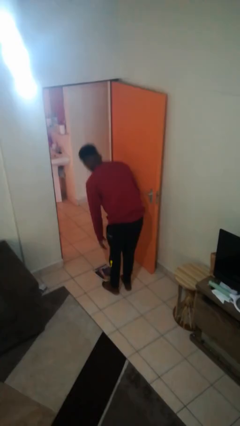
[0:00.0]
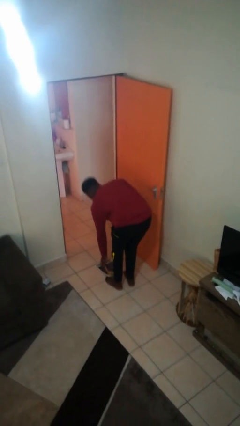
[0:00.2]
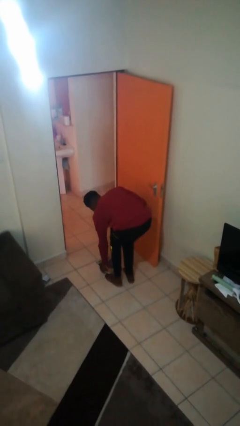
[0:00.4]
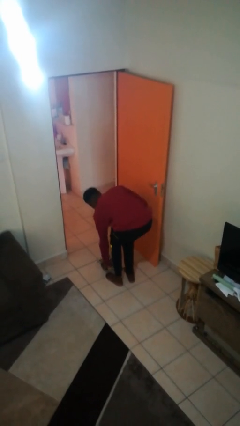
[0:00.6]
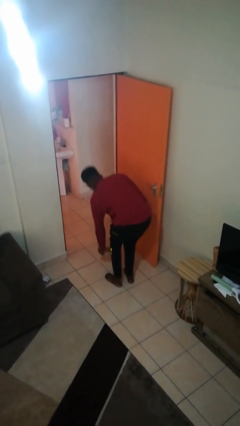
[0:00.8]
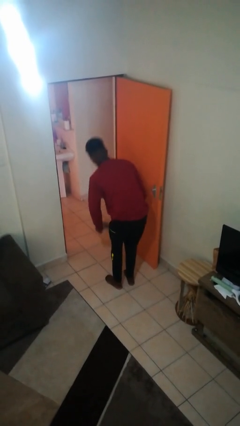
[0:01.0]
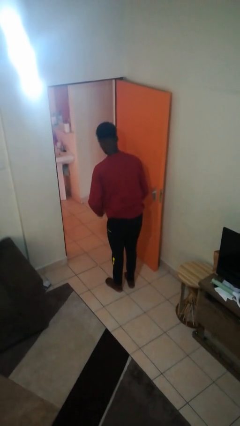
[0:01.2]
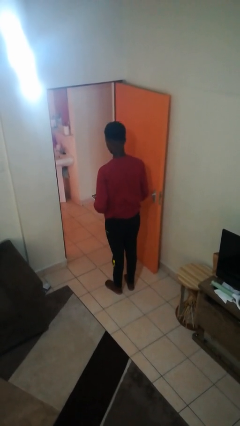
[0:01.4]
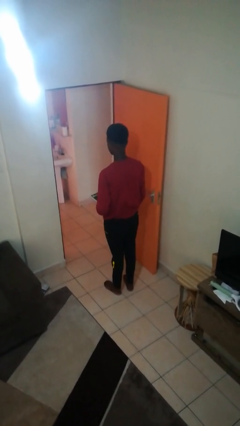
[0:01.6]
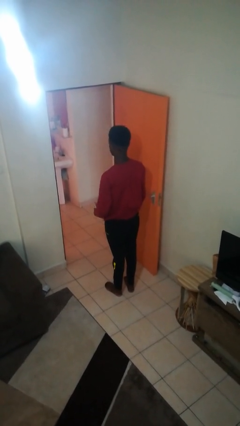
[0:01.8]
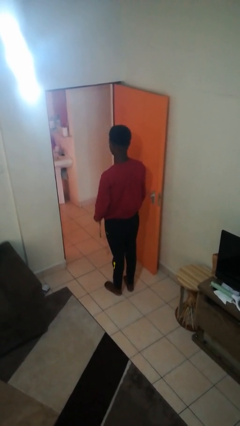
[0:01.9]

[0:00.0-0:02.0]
person picks up object from floor

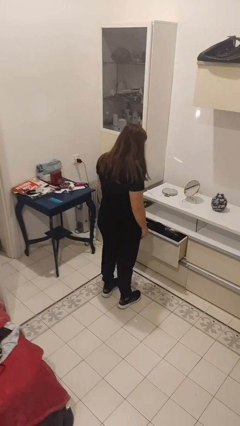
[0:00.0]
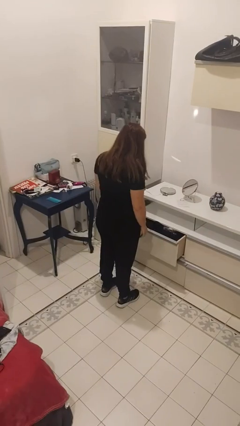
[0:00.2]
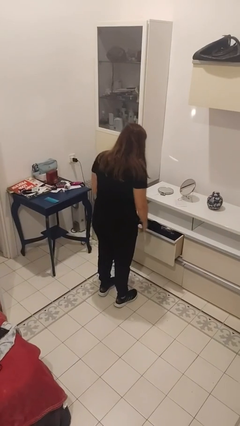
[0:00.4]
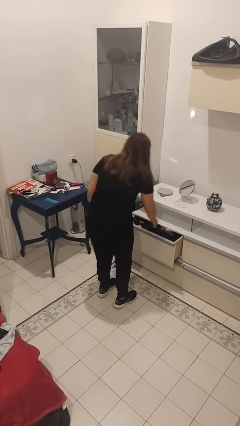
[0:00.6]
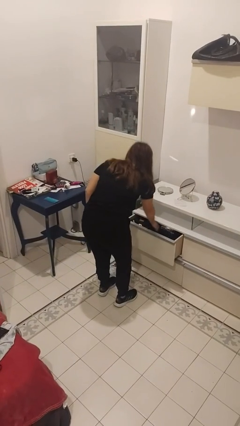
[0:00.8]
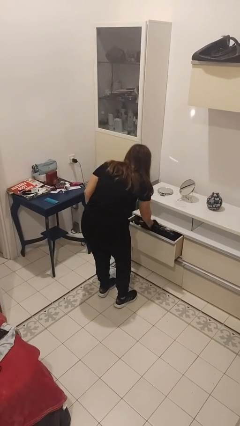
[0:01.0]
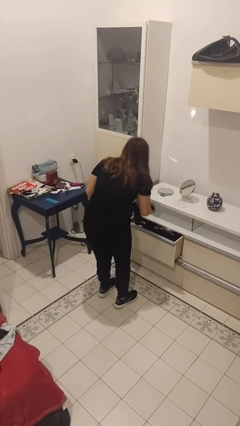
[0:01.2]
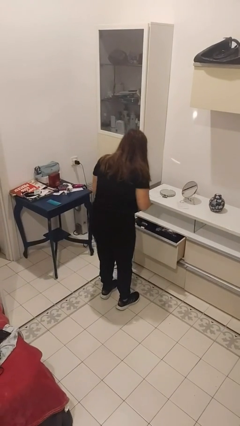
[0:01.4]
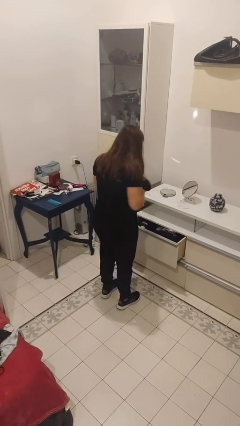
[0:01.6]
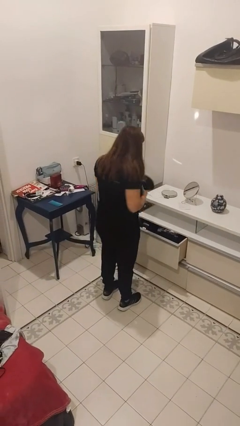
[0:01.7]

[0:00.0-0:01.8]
person takes clothes from dresser

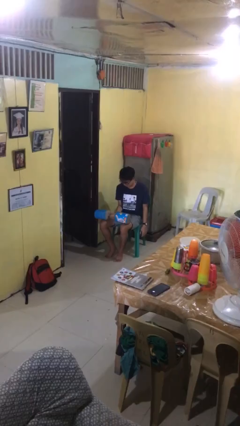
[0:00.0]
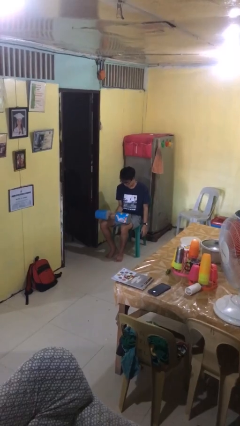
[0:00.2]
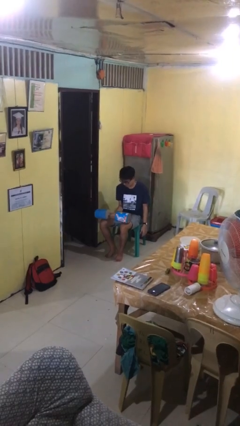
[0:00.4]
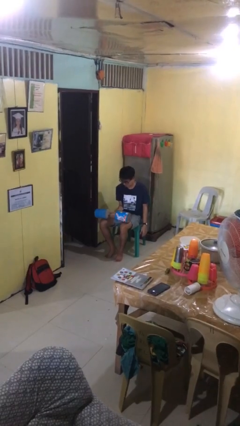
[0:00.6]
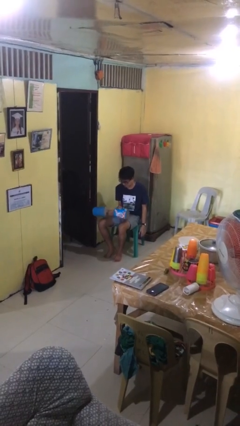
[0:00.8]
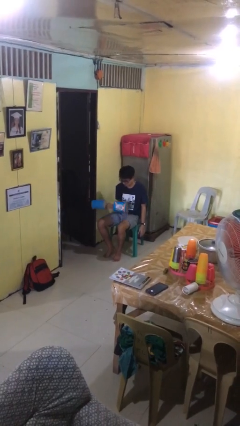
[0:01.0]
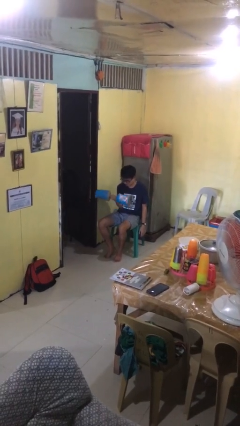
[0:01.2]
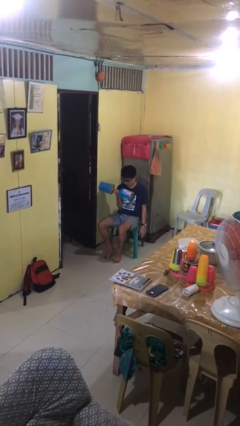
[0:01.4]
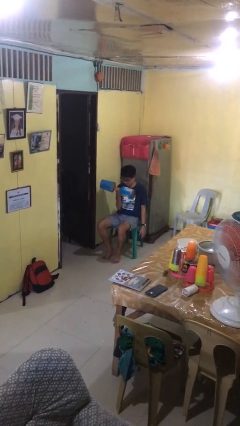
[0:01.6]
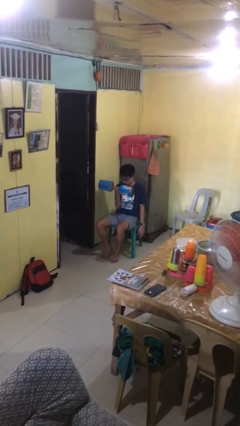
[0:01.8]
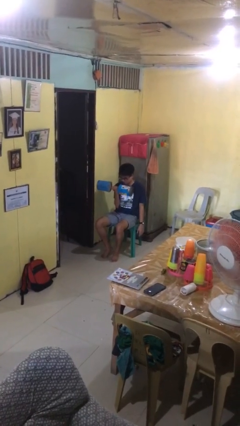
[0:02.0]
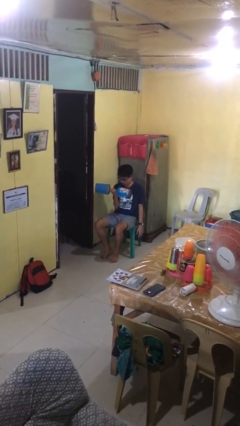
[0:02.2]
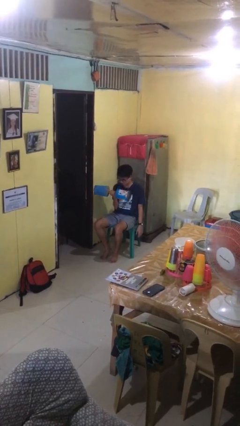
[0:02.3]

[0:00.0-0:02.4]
person lifts dumbbells

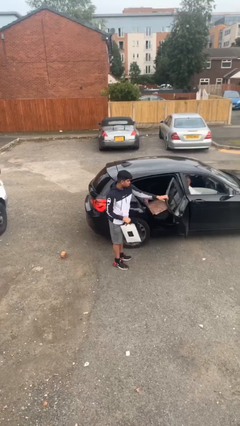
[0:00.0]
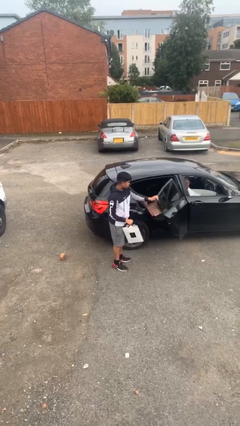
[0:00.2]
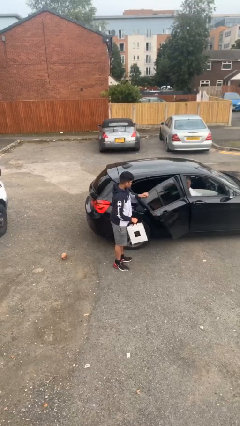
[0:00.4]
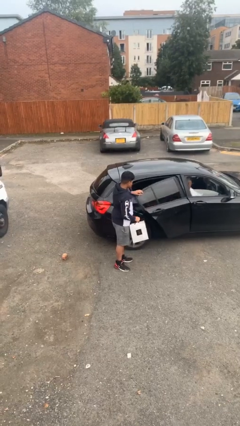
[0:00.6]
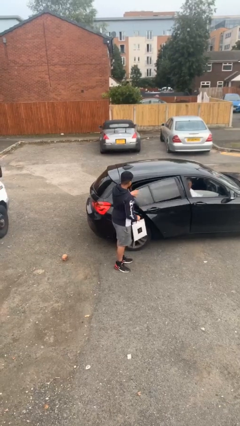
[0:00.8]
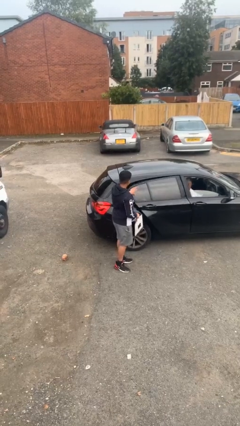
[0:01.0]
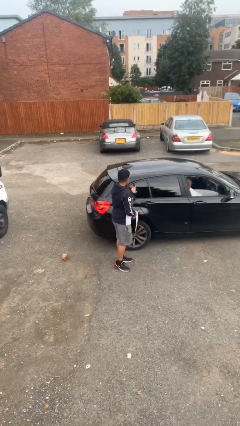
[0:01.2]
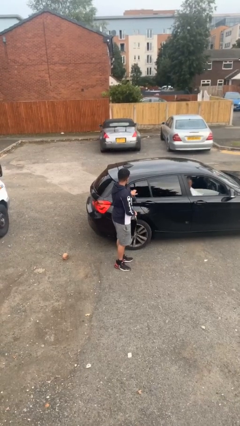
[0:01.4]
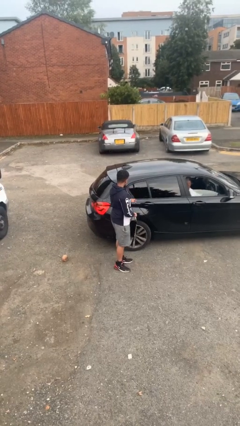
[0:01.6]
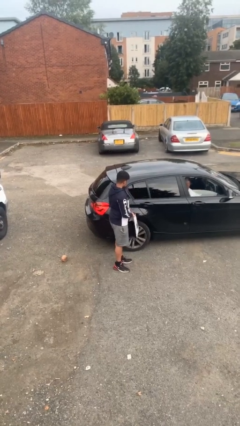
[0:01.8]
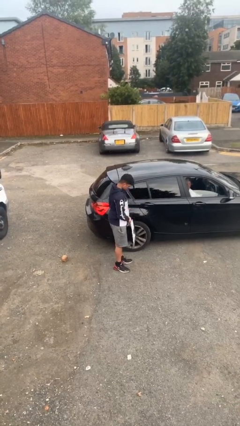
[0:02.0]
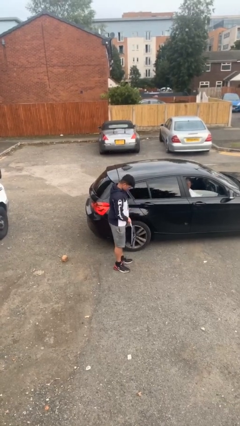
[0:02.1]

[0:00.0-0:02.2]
person closes car door

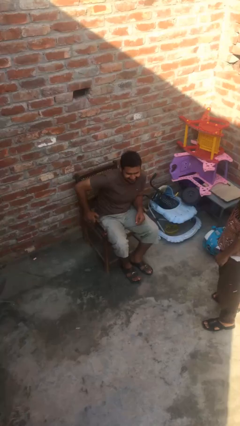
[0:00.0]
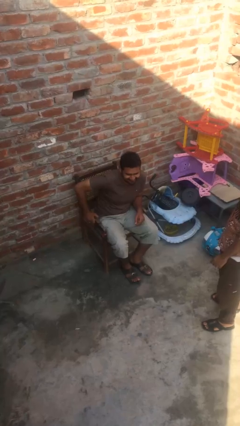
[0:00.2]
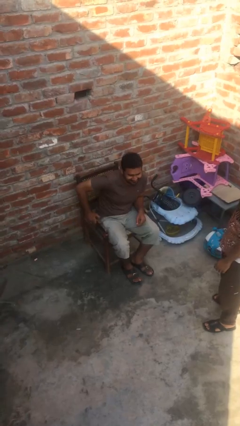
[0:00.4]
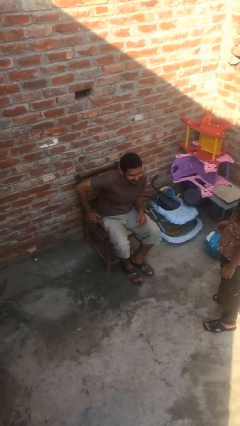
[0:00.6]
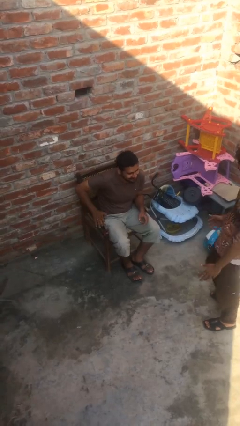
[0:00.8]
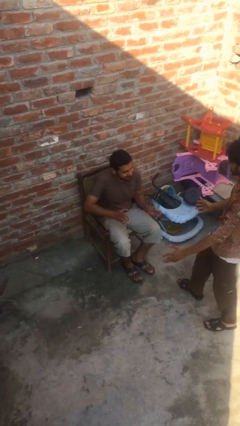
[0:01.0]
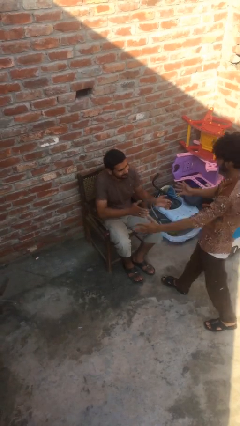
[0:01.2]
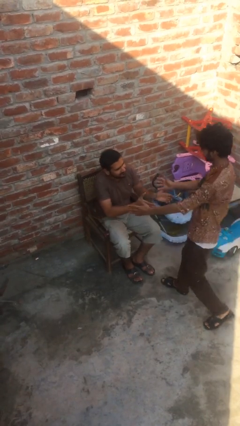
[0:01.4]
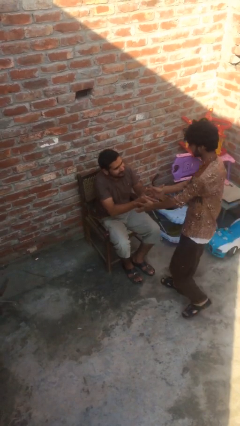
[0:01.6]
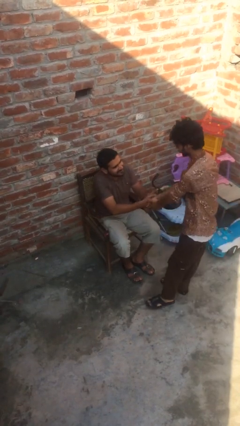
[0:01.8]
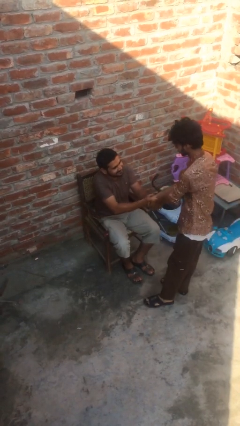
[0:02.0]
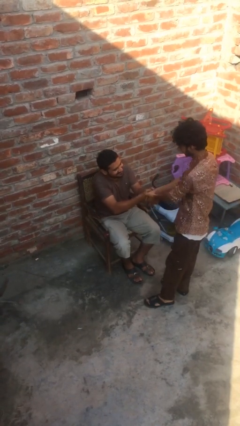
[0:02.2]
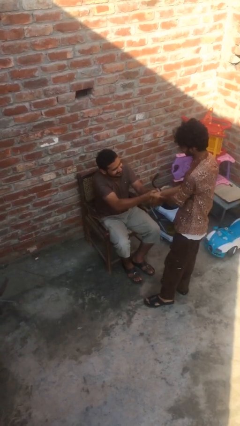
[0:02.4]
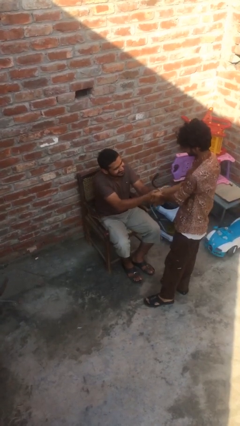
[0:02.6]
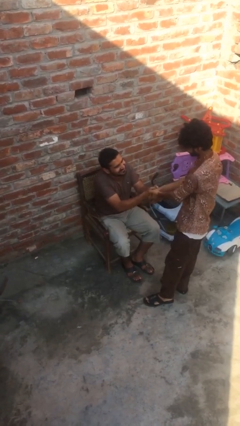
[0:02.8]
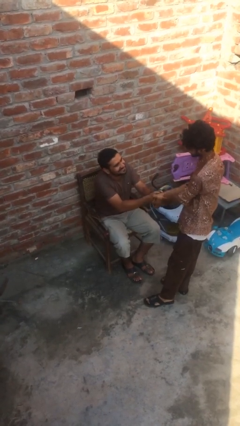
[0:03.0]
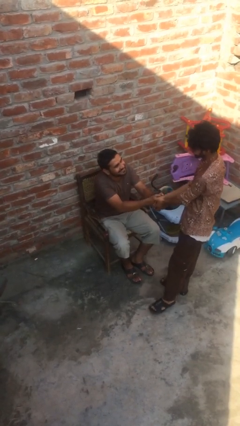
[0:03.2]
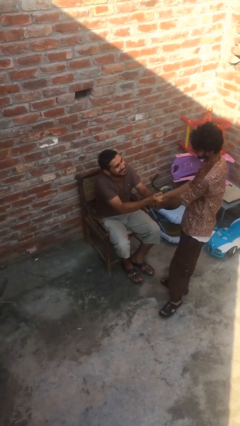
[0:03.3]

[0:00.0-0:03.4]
person shakes hand

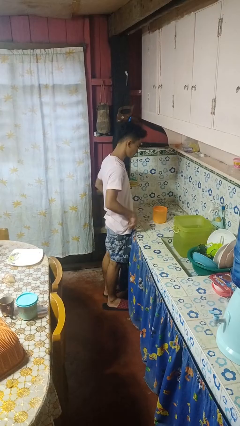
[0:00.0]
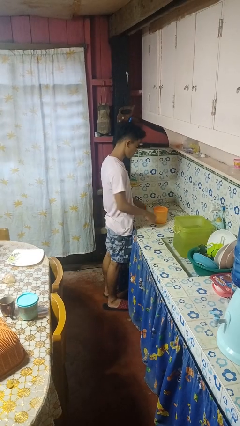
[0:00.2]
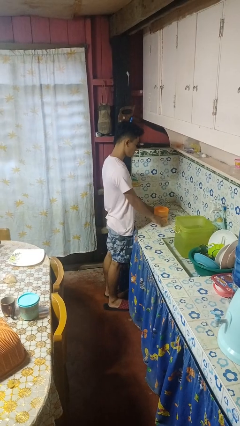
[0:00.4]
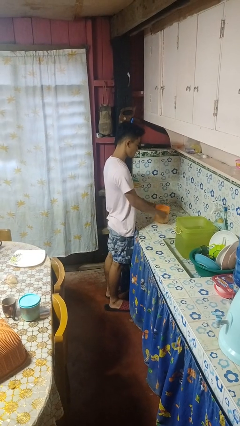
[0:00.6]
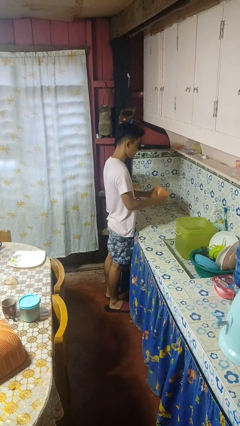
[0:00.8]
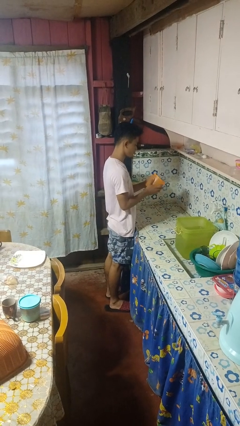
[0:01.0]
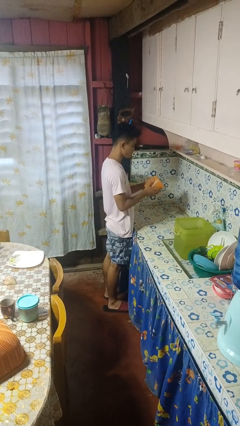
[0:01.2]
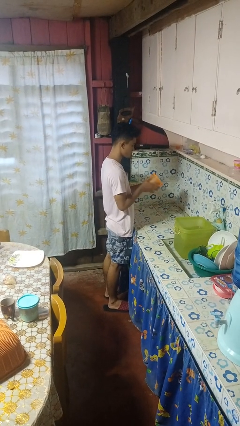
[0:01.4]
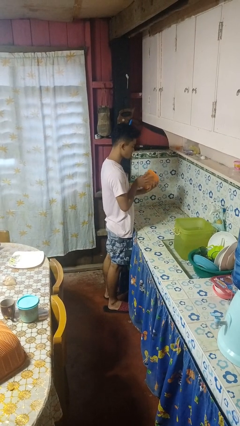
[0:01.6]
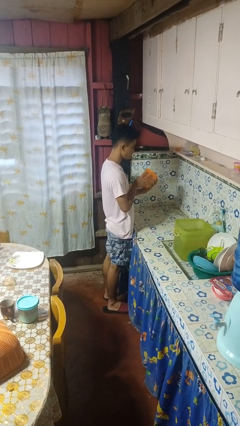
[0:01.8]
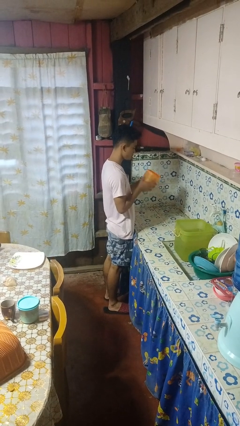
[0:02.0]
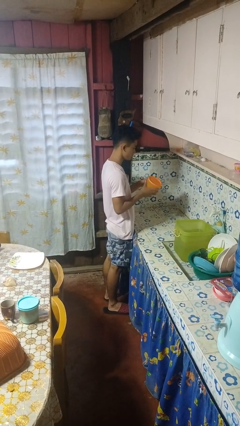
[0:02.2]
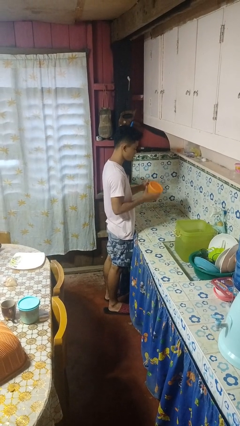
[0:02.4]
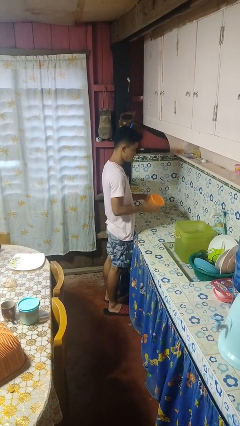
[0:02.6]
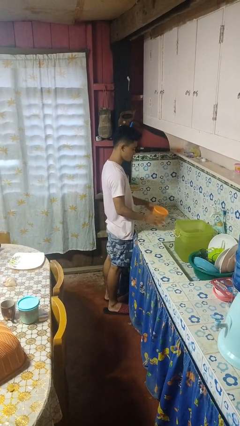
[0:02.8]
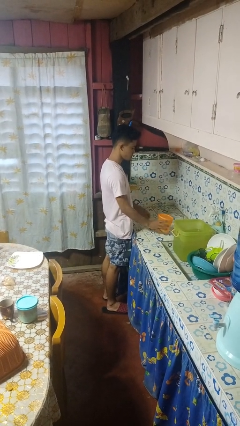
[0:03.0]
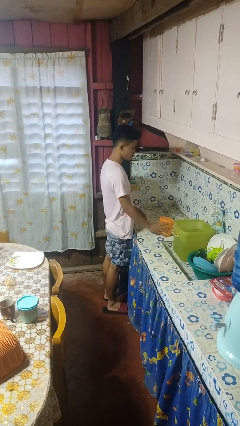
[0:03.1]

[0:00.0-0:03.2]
person picks up object from countertop

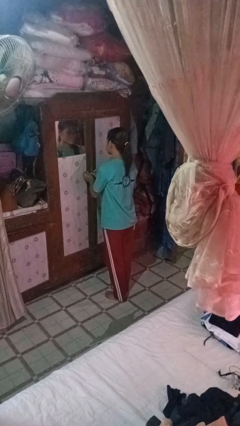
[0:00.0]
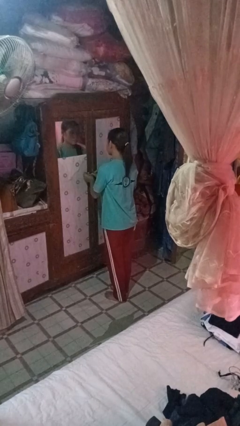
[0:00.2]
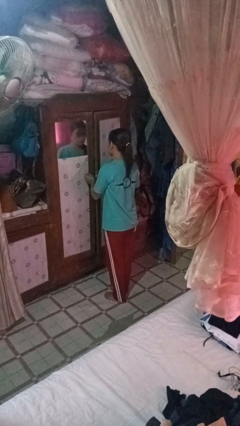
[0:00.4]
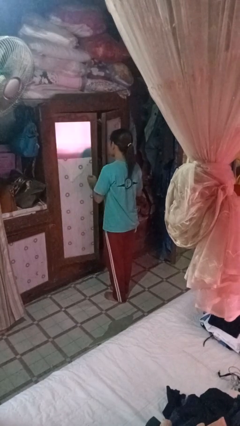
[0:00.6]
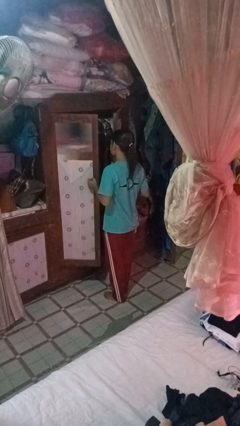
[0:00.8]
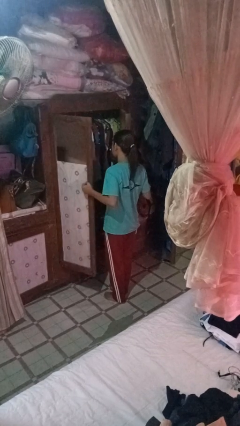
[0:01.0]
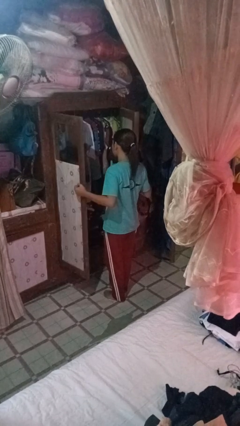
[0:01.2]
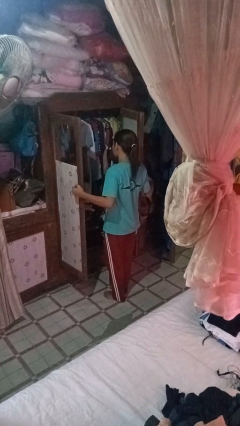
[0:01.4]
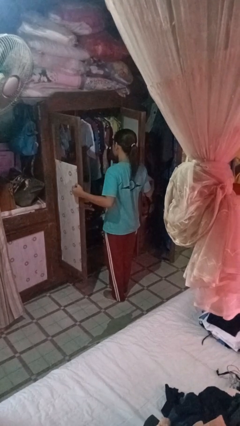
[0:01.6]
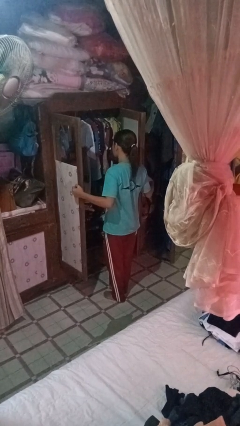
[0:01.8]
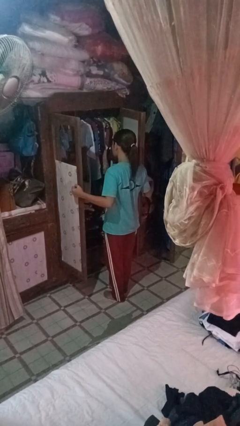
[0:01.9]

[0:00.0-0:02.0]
person opens closet door

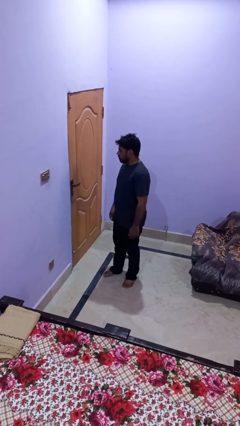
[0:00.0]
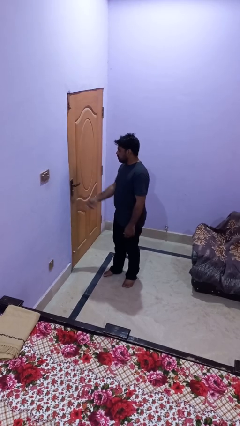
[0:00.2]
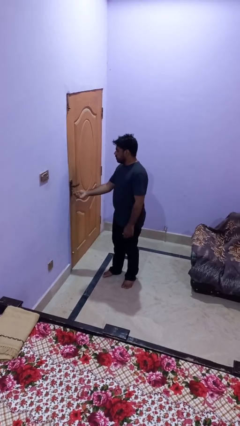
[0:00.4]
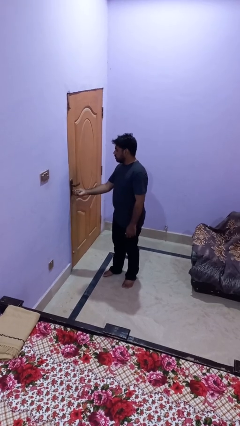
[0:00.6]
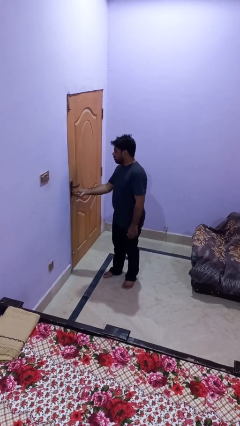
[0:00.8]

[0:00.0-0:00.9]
person locks door with keys
